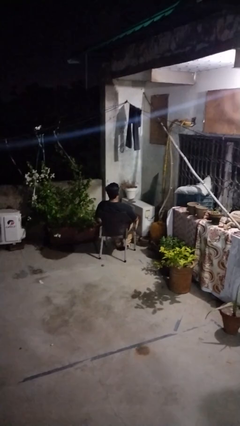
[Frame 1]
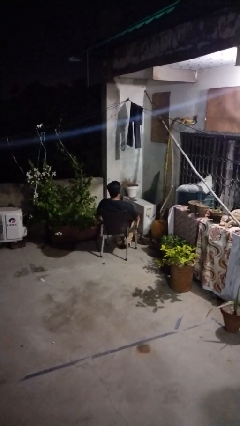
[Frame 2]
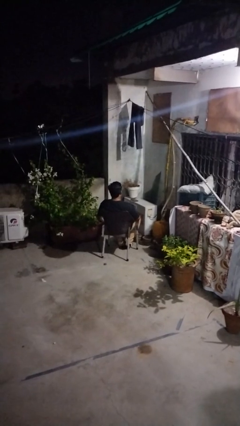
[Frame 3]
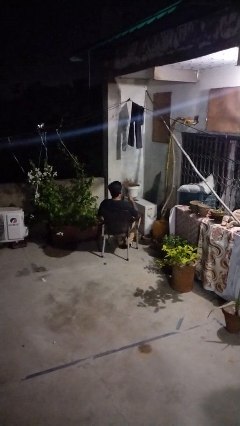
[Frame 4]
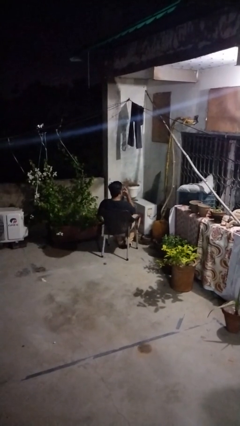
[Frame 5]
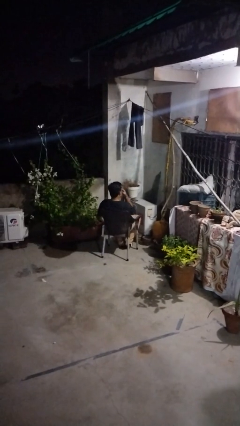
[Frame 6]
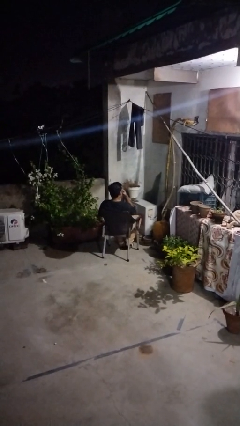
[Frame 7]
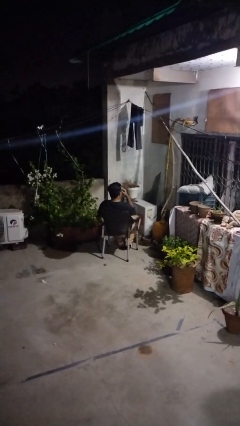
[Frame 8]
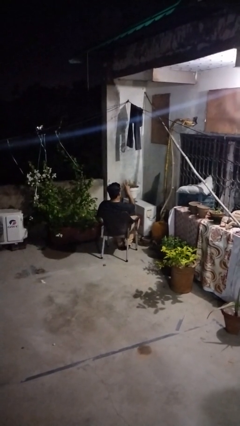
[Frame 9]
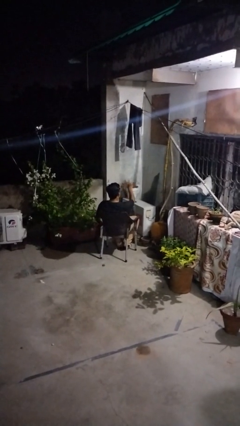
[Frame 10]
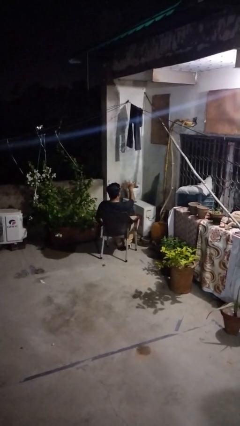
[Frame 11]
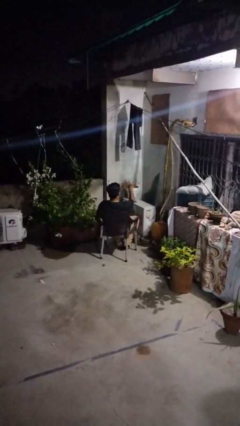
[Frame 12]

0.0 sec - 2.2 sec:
person gestures watch closely

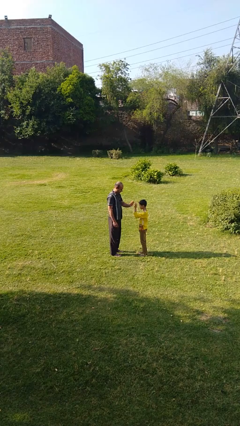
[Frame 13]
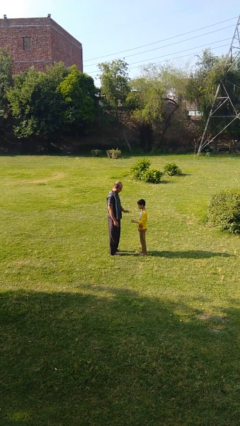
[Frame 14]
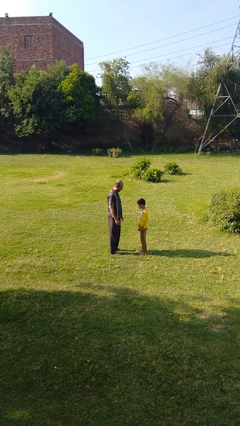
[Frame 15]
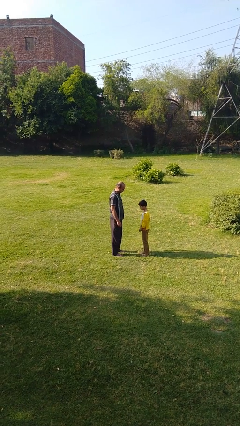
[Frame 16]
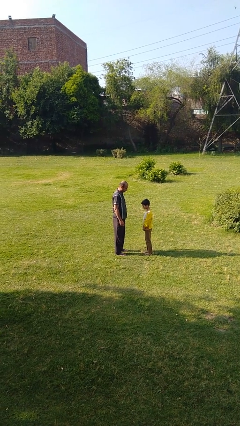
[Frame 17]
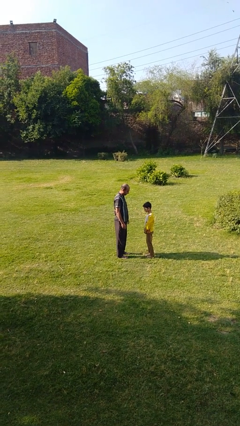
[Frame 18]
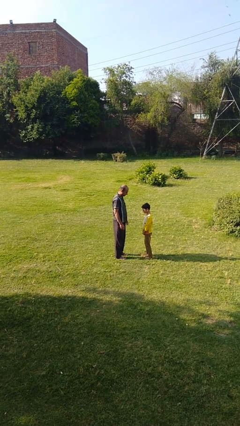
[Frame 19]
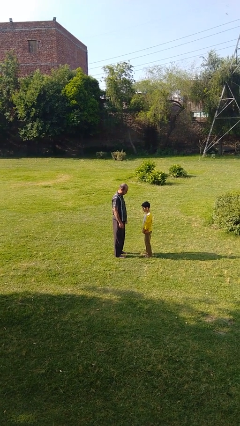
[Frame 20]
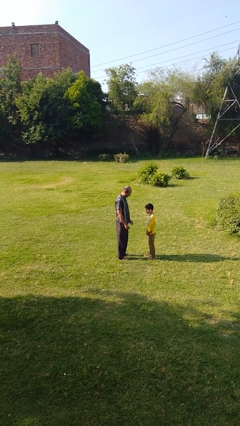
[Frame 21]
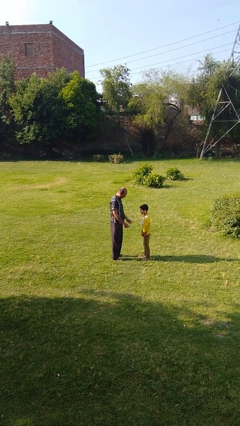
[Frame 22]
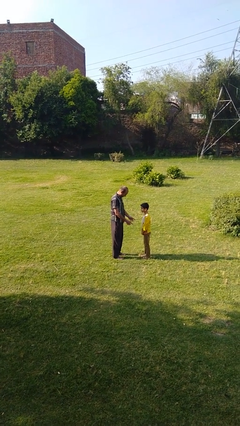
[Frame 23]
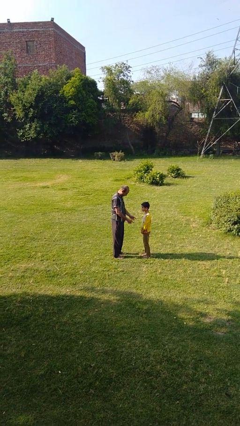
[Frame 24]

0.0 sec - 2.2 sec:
person highfives hand

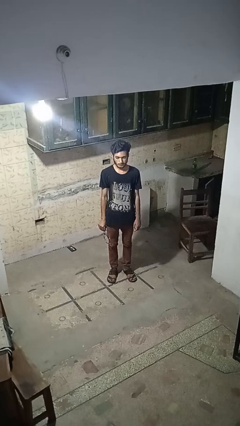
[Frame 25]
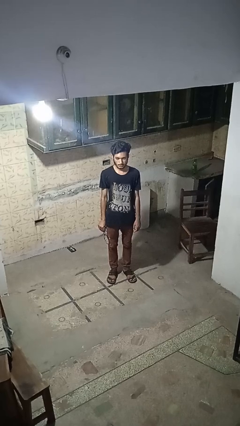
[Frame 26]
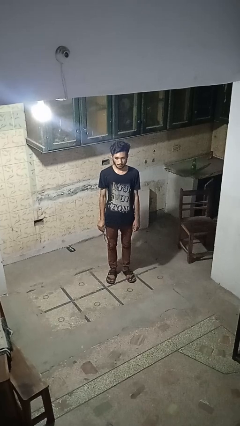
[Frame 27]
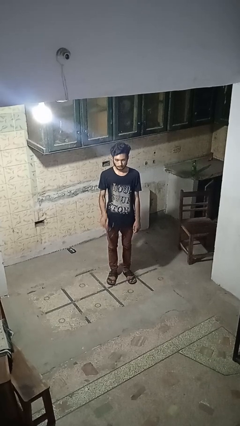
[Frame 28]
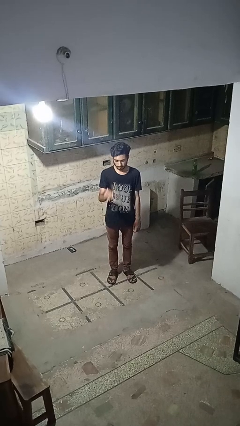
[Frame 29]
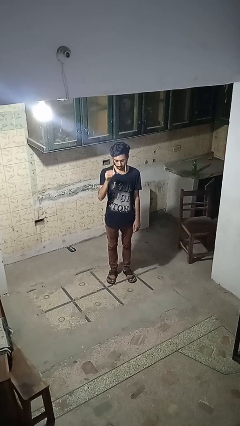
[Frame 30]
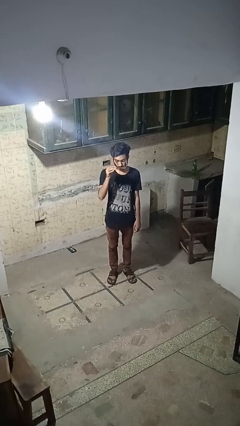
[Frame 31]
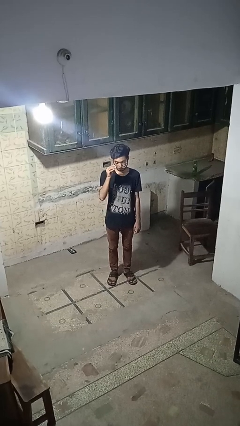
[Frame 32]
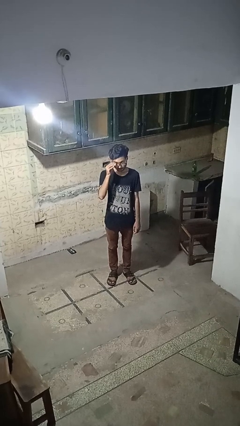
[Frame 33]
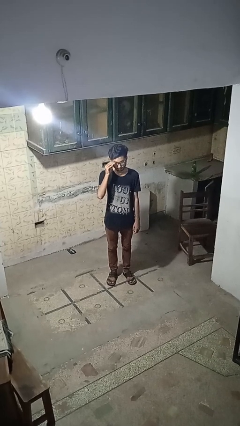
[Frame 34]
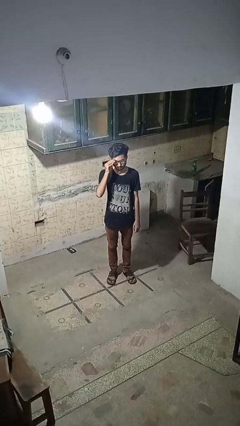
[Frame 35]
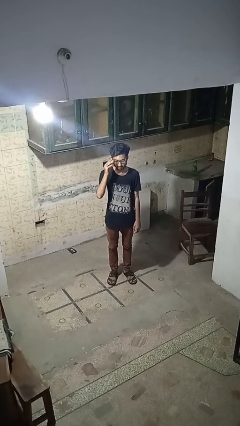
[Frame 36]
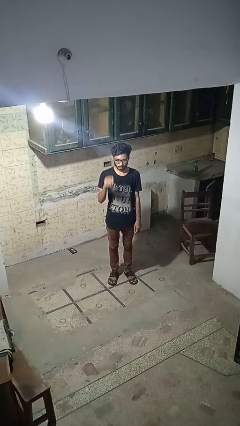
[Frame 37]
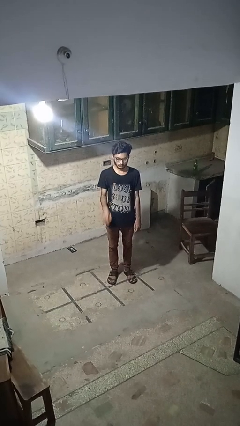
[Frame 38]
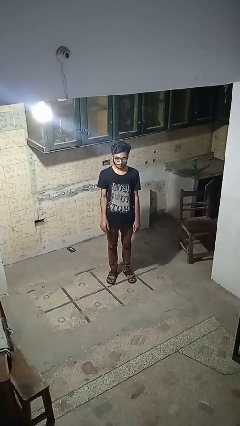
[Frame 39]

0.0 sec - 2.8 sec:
person puts on glasses

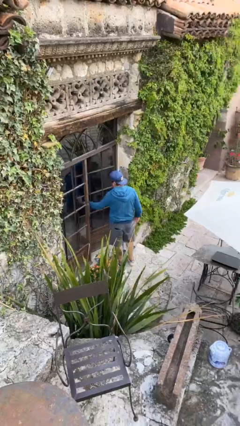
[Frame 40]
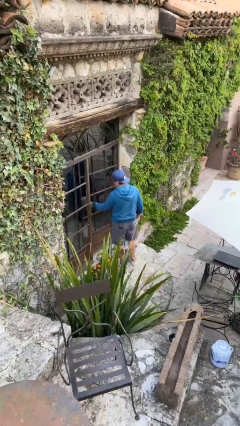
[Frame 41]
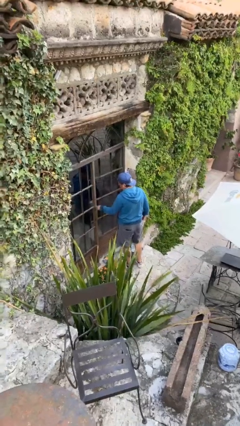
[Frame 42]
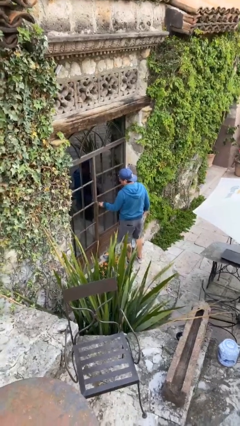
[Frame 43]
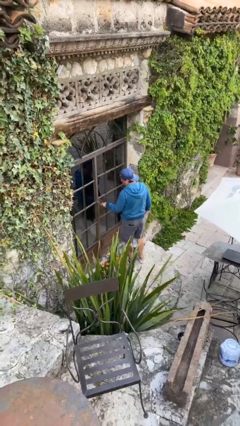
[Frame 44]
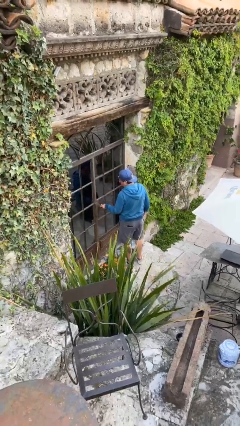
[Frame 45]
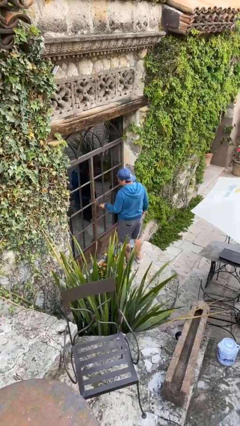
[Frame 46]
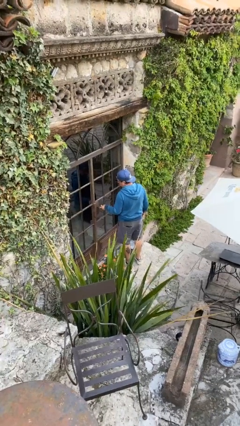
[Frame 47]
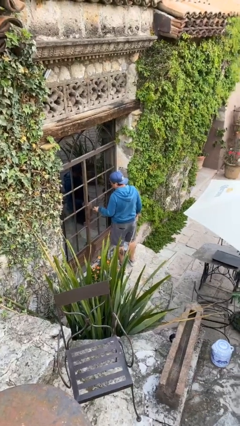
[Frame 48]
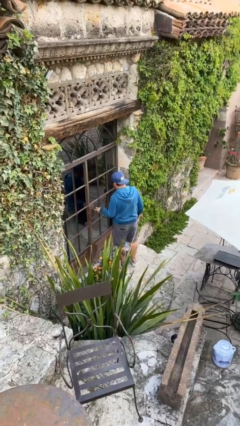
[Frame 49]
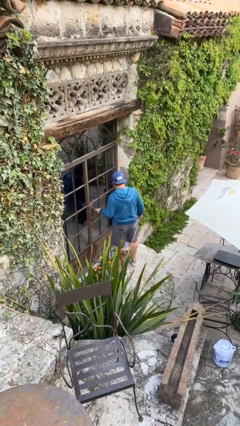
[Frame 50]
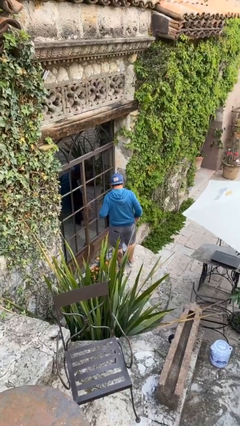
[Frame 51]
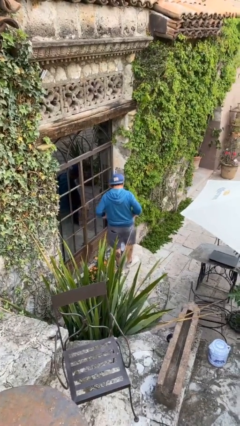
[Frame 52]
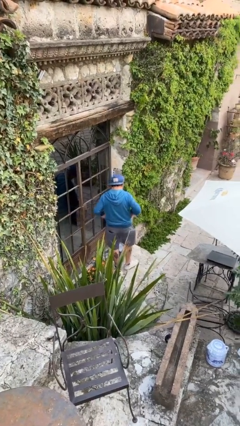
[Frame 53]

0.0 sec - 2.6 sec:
person closes facility door

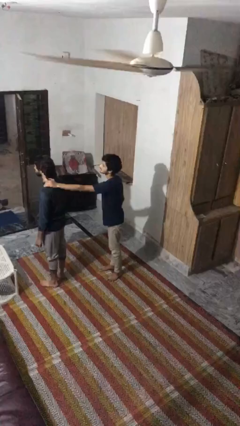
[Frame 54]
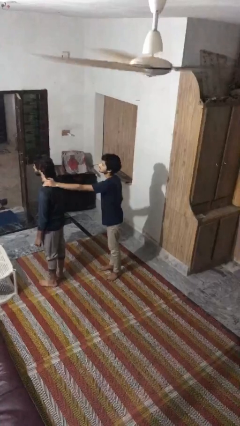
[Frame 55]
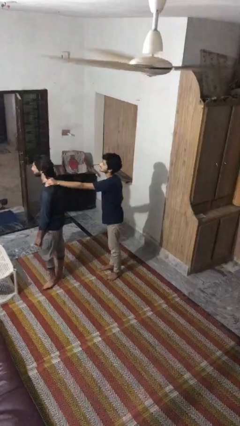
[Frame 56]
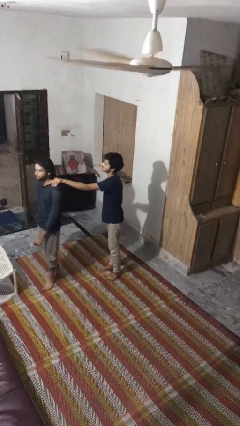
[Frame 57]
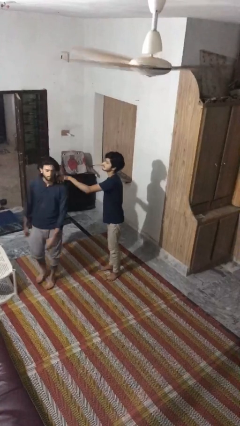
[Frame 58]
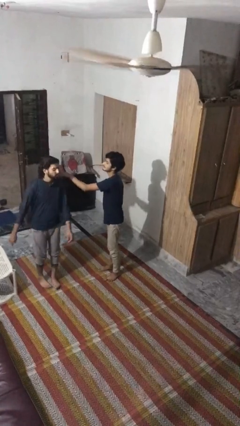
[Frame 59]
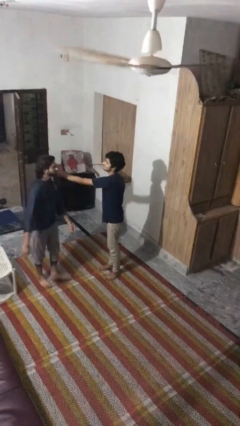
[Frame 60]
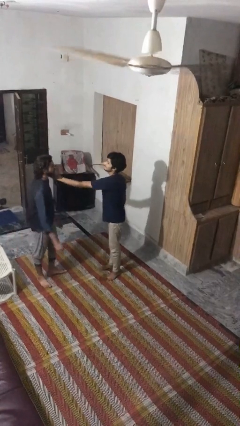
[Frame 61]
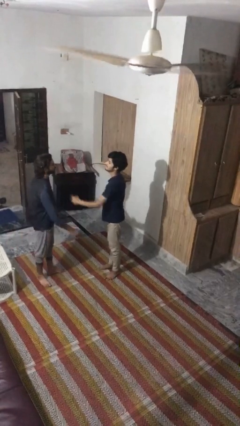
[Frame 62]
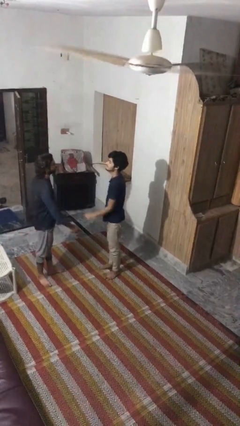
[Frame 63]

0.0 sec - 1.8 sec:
person spins person around

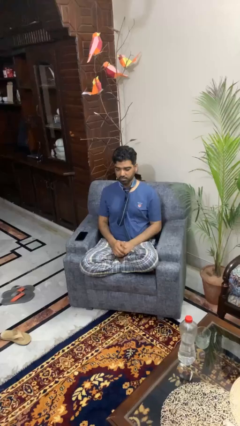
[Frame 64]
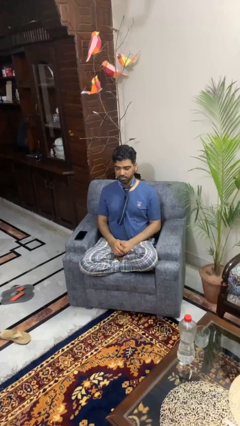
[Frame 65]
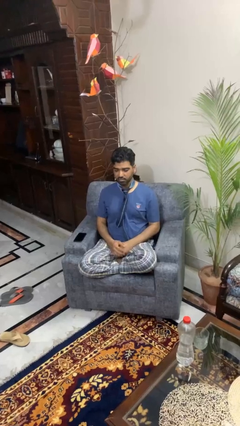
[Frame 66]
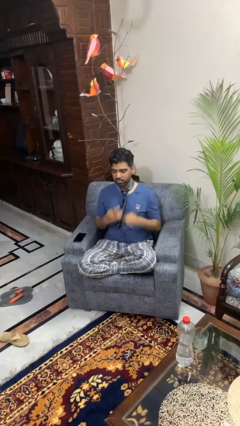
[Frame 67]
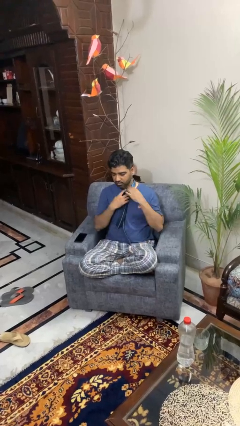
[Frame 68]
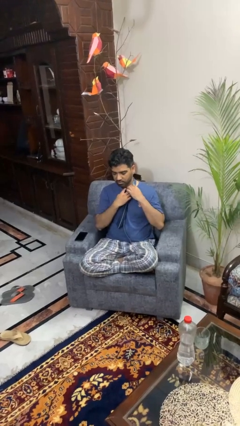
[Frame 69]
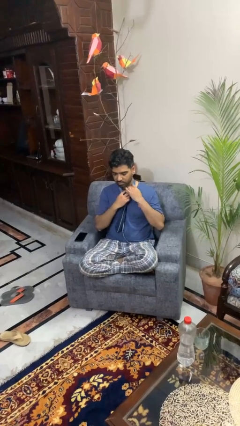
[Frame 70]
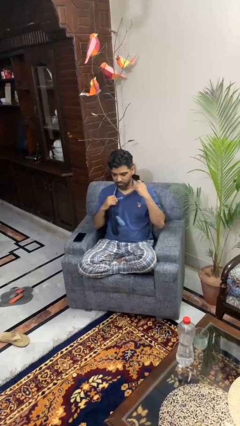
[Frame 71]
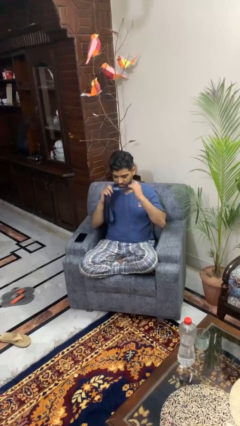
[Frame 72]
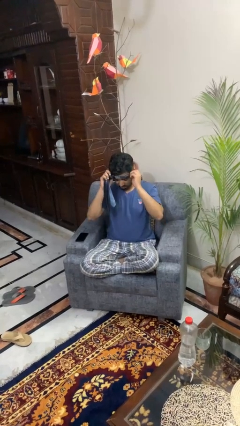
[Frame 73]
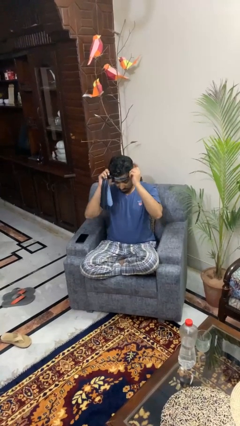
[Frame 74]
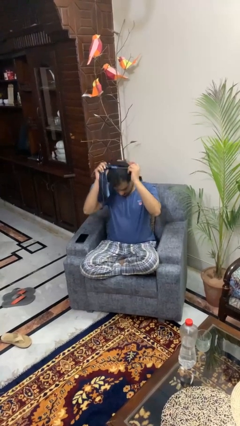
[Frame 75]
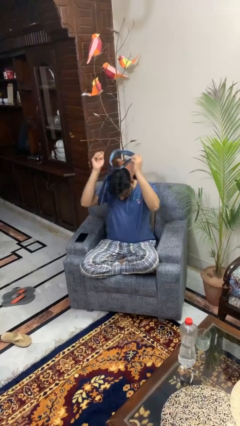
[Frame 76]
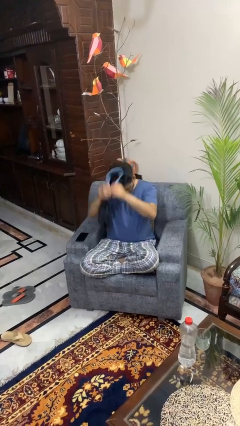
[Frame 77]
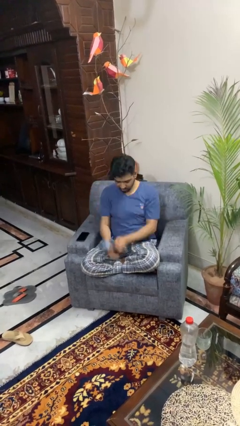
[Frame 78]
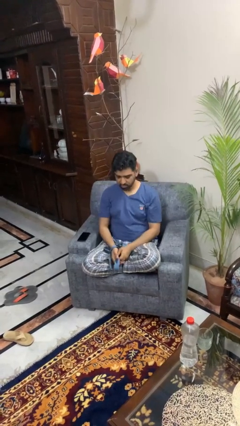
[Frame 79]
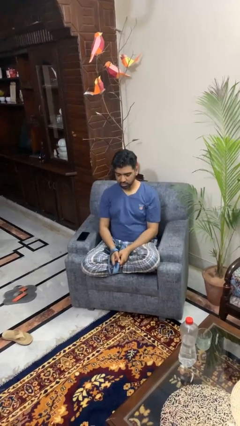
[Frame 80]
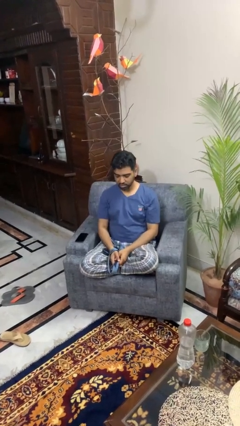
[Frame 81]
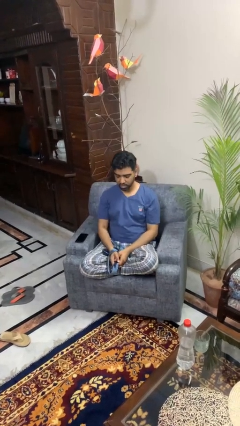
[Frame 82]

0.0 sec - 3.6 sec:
person takes off necktie

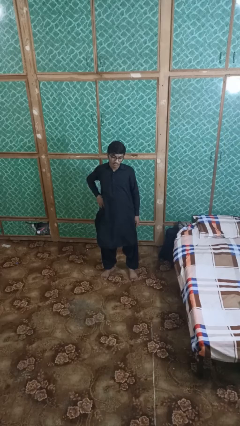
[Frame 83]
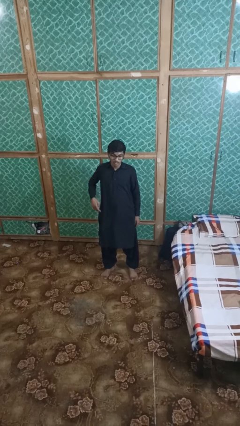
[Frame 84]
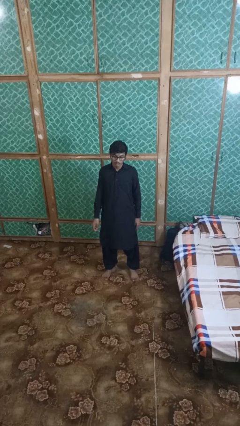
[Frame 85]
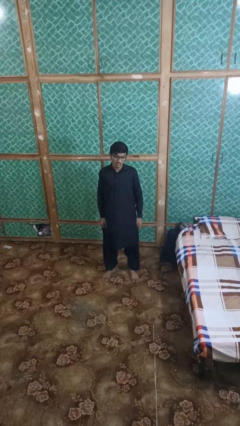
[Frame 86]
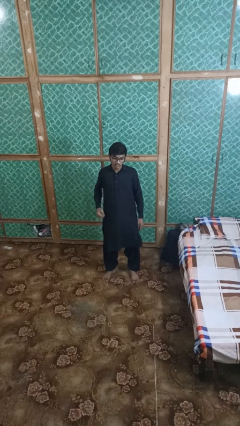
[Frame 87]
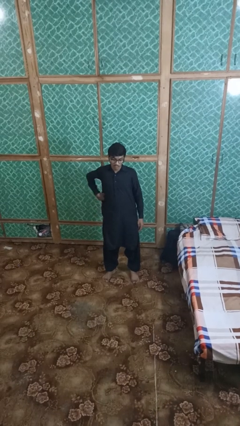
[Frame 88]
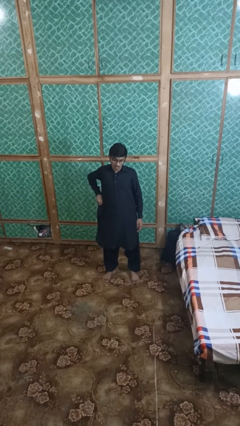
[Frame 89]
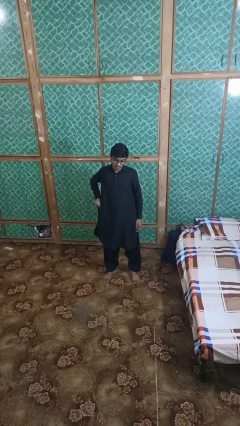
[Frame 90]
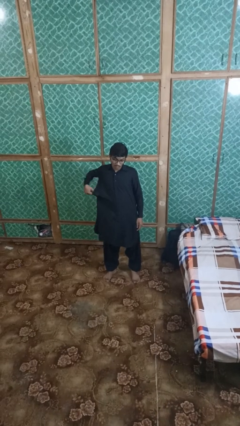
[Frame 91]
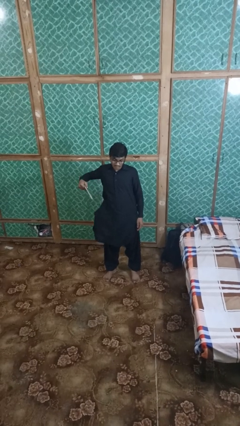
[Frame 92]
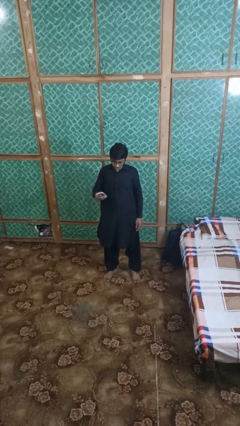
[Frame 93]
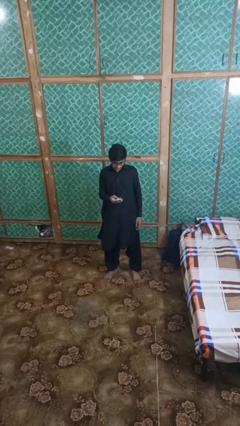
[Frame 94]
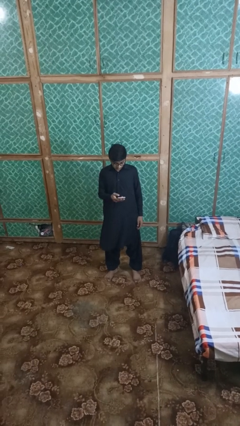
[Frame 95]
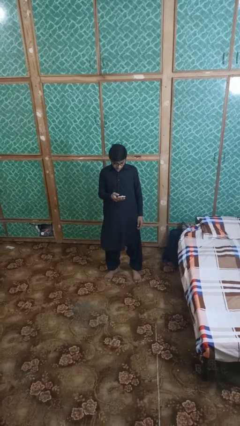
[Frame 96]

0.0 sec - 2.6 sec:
person takes phone from pocket
